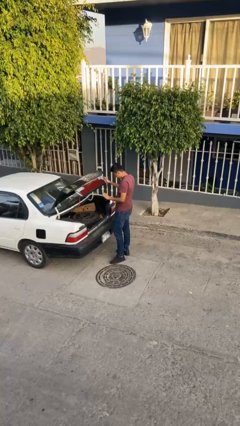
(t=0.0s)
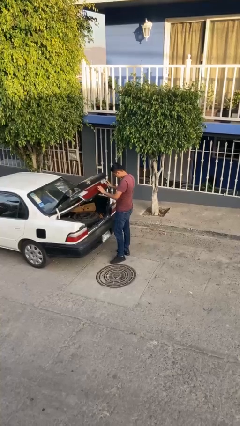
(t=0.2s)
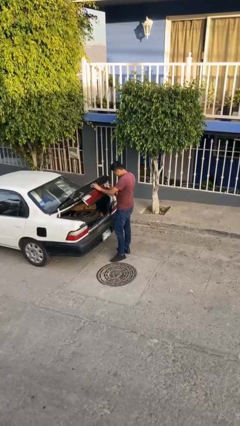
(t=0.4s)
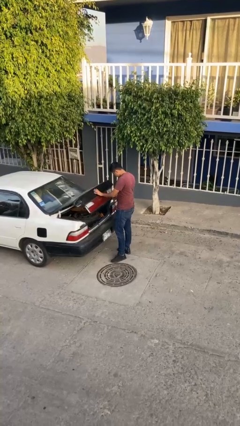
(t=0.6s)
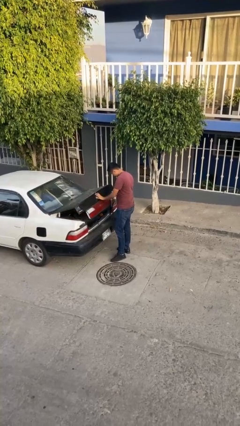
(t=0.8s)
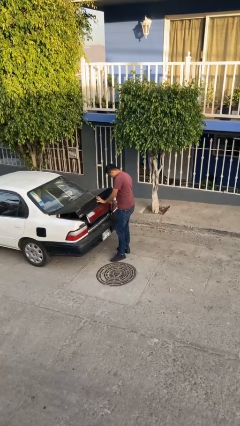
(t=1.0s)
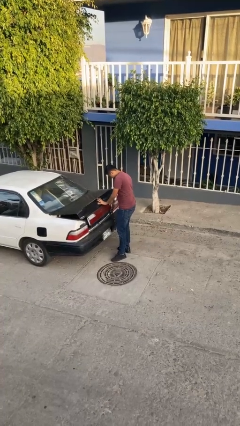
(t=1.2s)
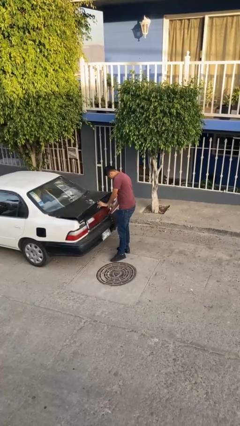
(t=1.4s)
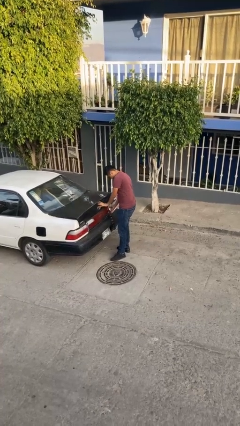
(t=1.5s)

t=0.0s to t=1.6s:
person closes car trunk

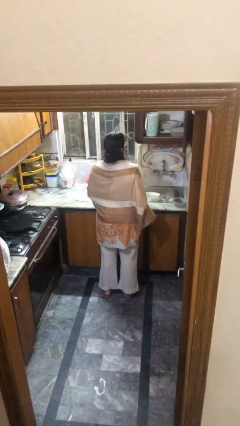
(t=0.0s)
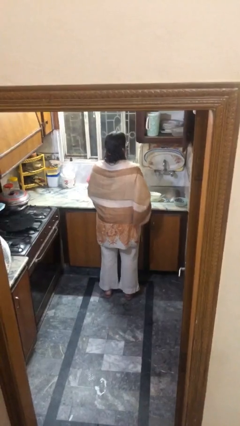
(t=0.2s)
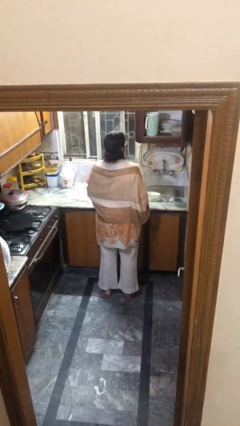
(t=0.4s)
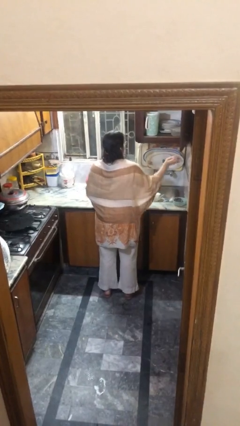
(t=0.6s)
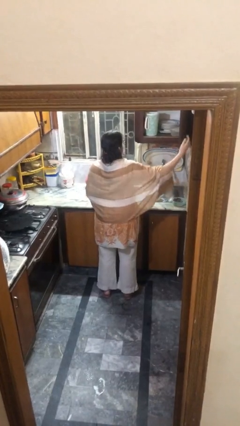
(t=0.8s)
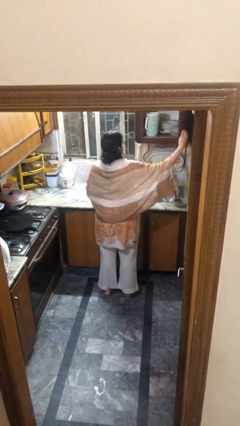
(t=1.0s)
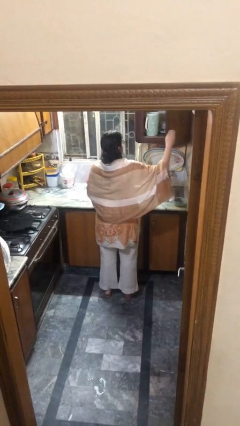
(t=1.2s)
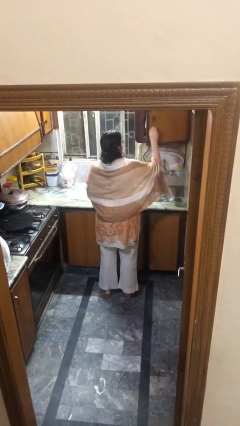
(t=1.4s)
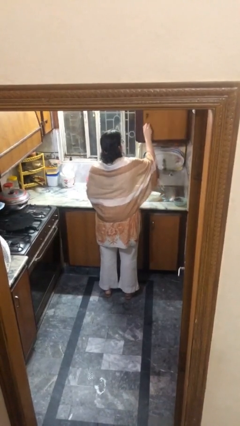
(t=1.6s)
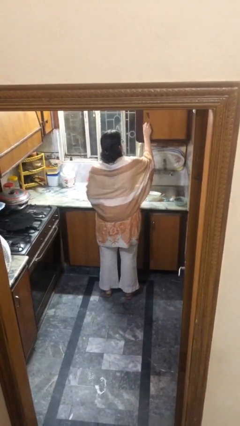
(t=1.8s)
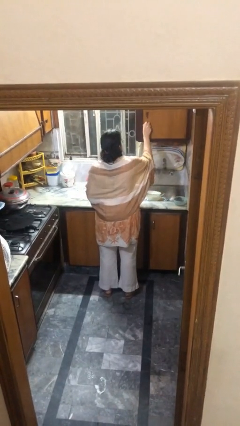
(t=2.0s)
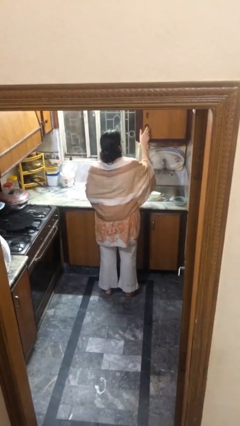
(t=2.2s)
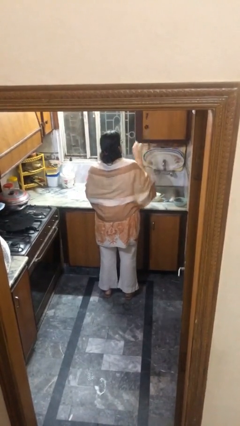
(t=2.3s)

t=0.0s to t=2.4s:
person closes kitchen drawer

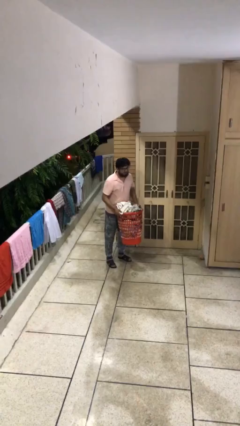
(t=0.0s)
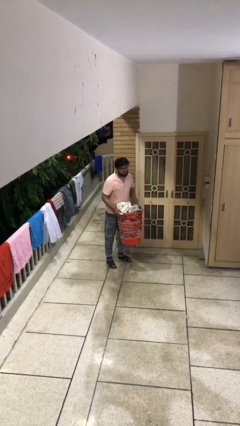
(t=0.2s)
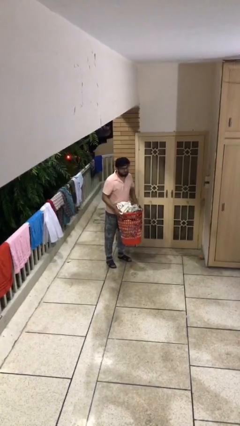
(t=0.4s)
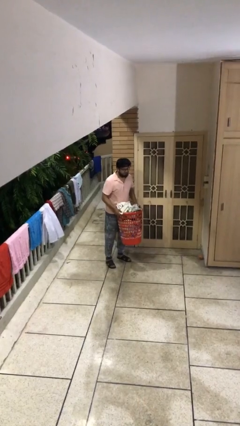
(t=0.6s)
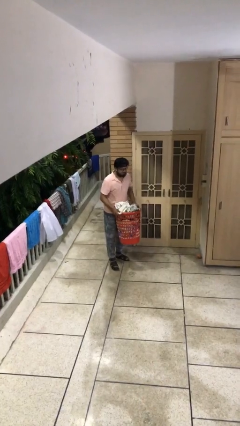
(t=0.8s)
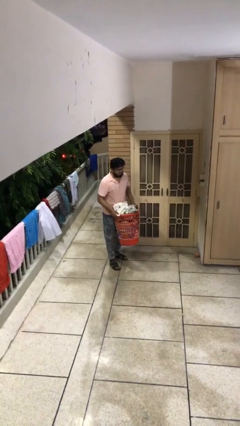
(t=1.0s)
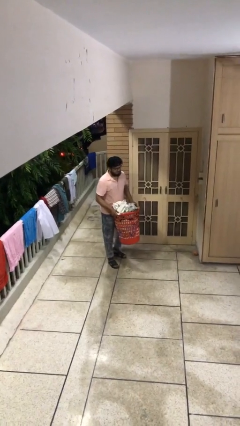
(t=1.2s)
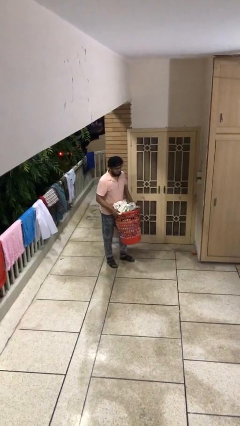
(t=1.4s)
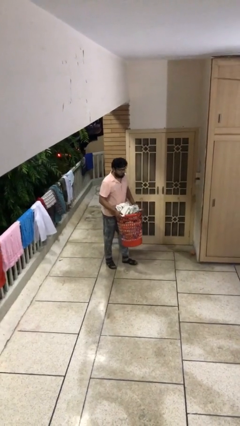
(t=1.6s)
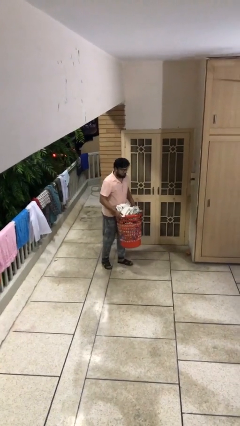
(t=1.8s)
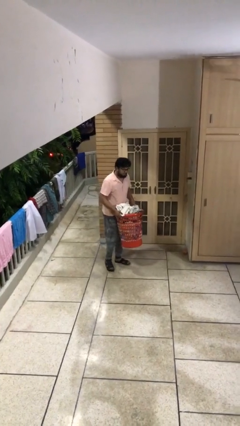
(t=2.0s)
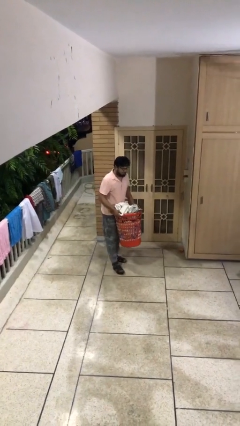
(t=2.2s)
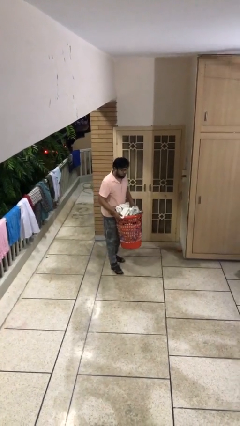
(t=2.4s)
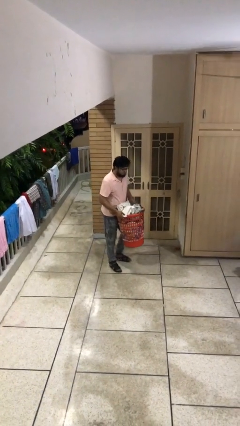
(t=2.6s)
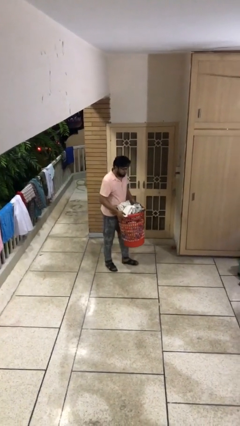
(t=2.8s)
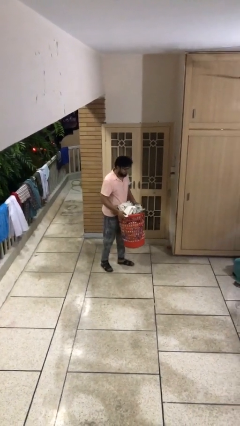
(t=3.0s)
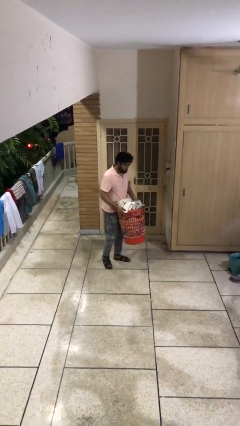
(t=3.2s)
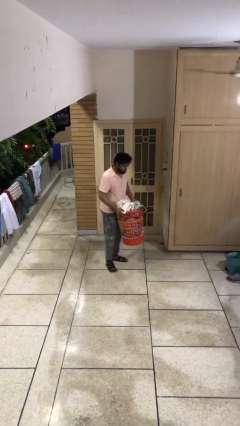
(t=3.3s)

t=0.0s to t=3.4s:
person carries heavy object

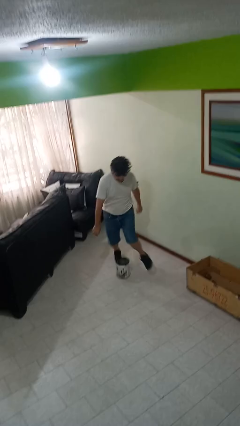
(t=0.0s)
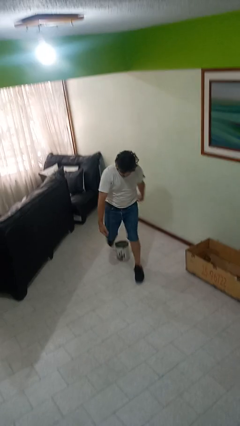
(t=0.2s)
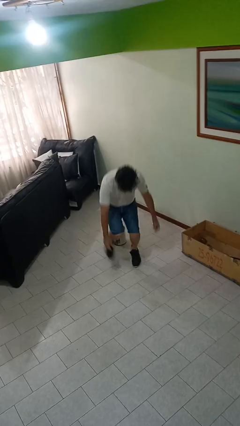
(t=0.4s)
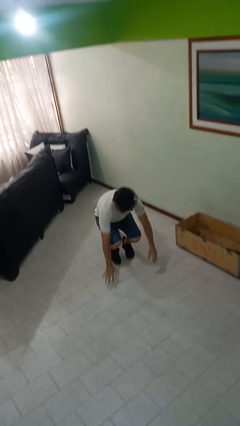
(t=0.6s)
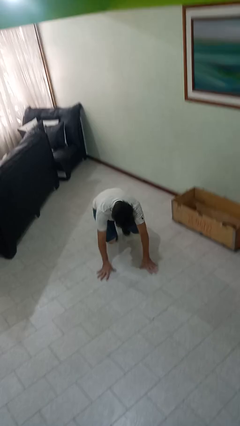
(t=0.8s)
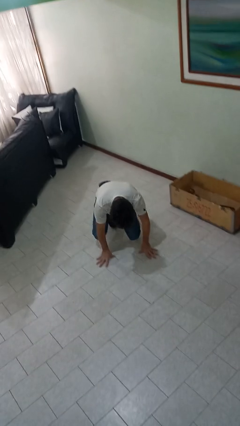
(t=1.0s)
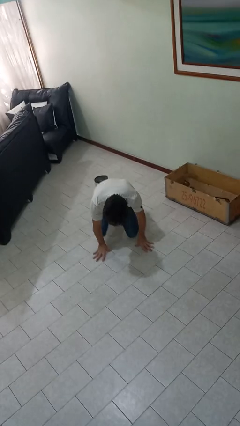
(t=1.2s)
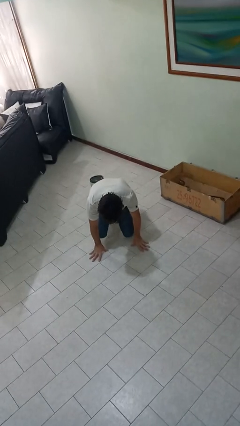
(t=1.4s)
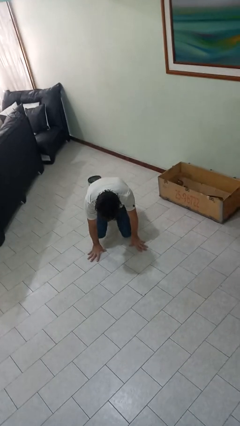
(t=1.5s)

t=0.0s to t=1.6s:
person trips on object on floor

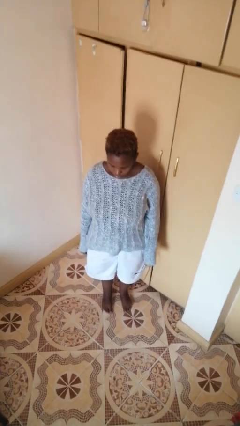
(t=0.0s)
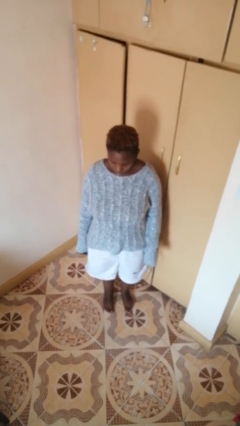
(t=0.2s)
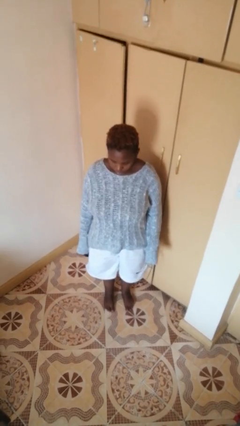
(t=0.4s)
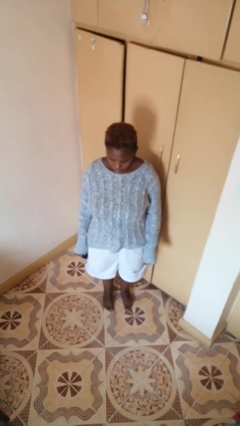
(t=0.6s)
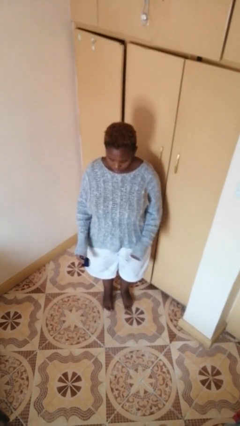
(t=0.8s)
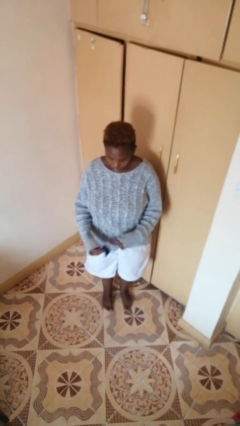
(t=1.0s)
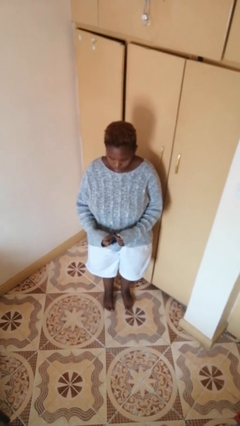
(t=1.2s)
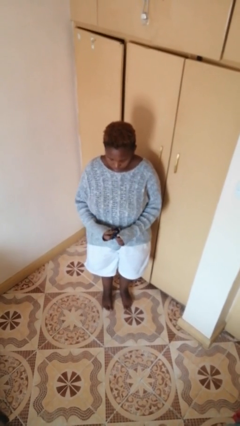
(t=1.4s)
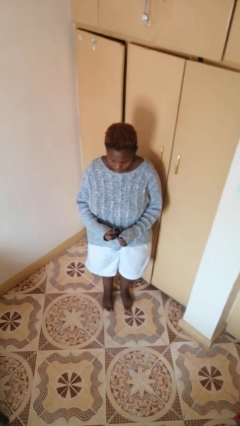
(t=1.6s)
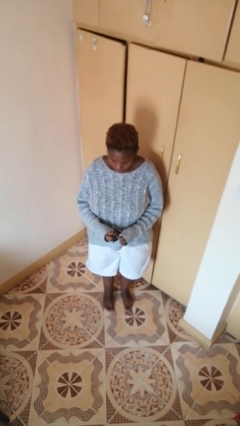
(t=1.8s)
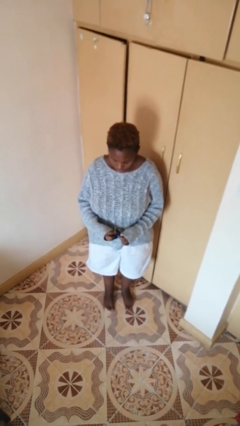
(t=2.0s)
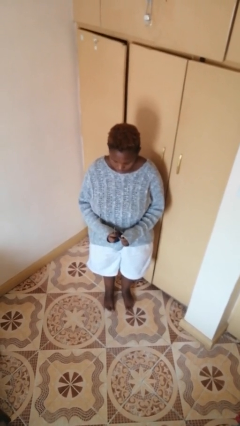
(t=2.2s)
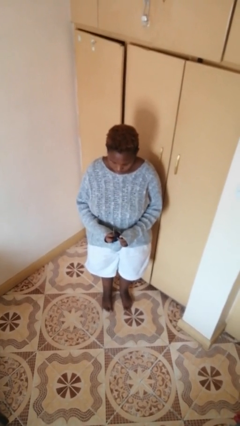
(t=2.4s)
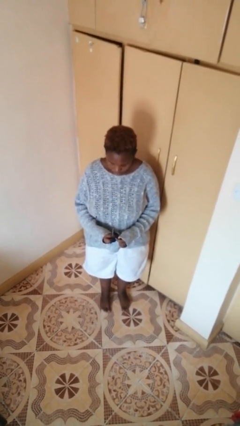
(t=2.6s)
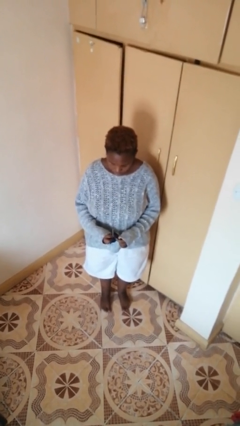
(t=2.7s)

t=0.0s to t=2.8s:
person cleans eyeglasses

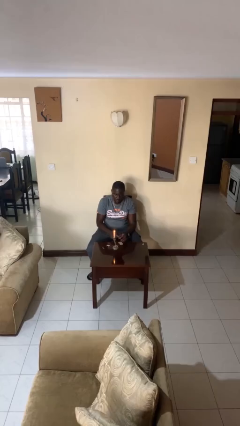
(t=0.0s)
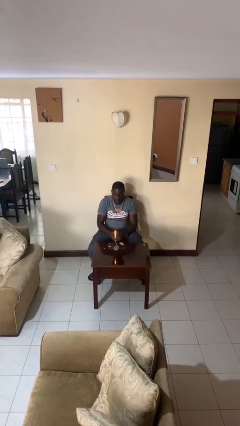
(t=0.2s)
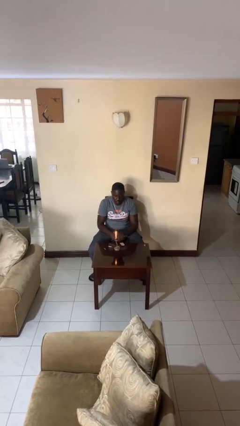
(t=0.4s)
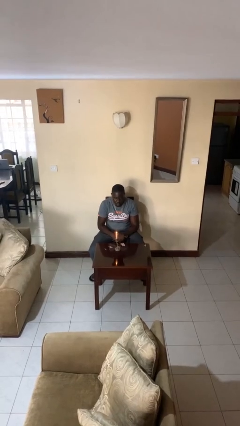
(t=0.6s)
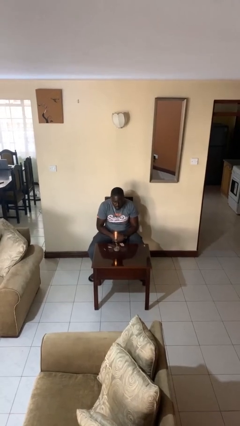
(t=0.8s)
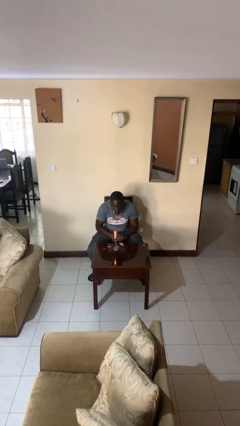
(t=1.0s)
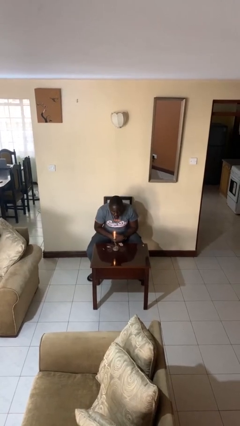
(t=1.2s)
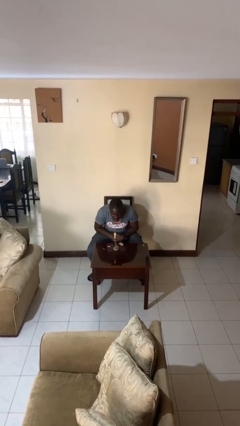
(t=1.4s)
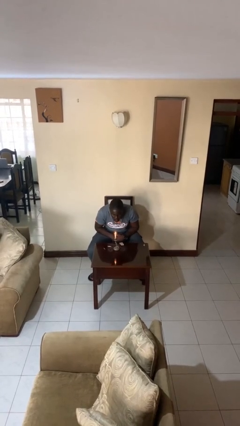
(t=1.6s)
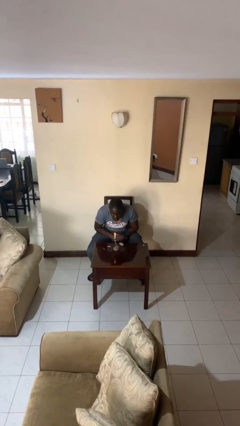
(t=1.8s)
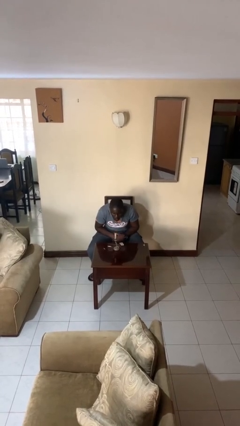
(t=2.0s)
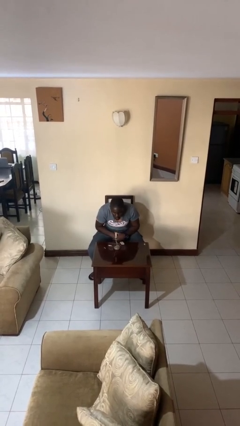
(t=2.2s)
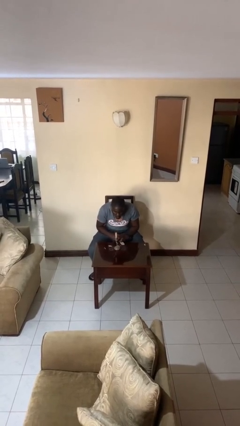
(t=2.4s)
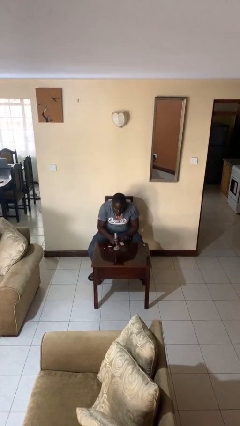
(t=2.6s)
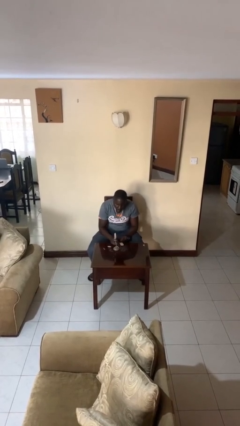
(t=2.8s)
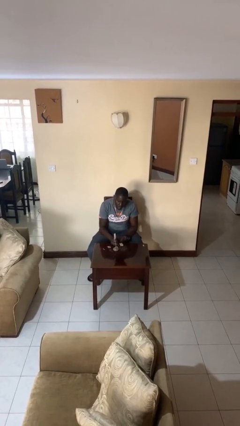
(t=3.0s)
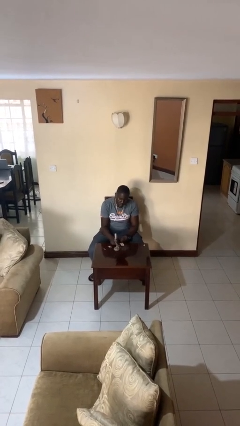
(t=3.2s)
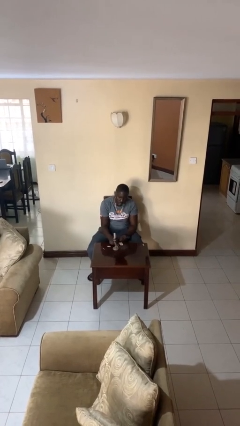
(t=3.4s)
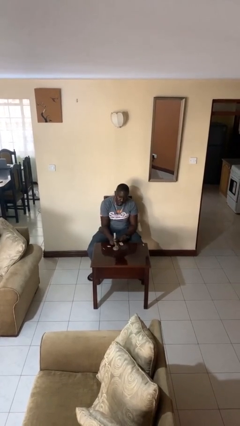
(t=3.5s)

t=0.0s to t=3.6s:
person extinguishes candle

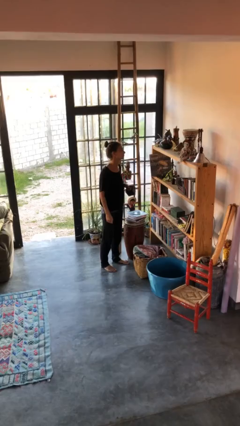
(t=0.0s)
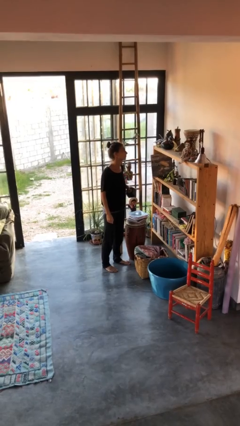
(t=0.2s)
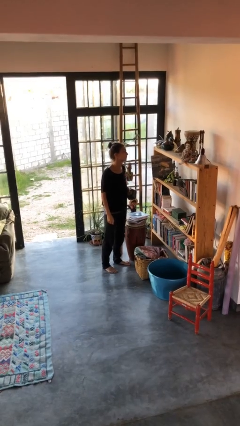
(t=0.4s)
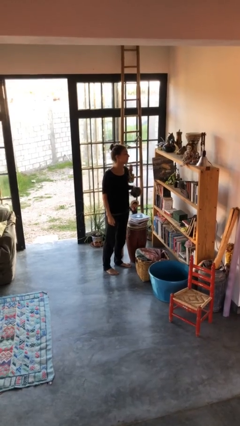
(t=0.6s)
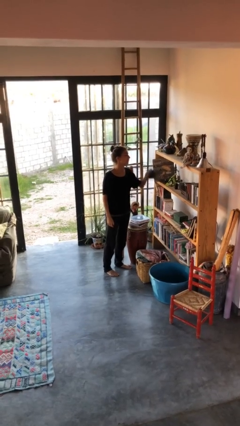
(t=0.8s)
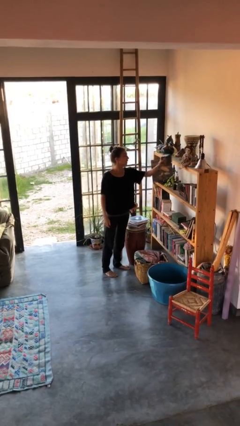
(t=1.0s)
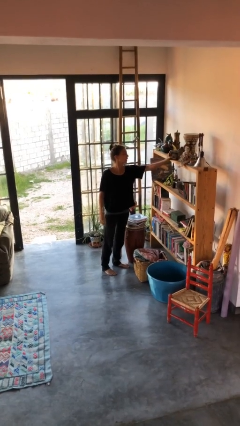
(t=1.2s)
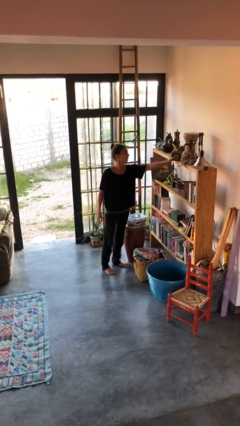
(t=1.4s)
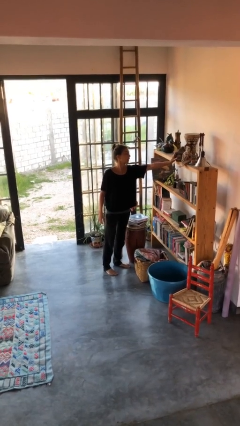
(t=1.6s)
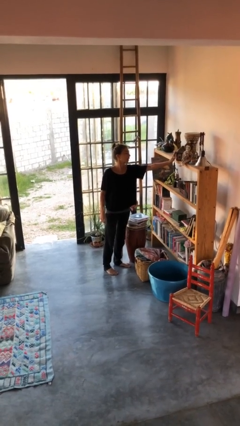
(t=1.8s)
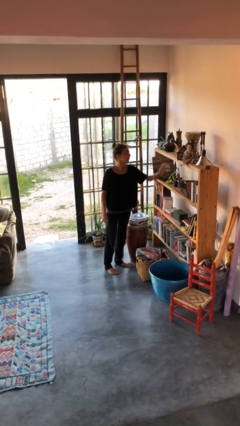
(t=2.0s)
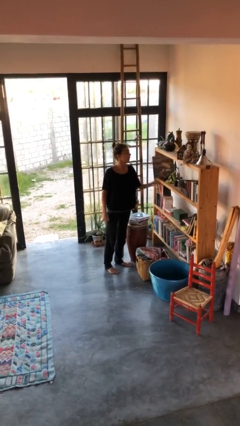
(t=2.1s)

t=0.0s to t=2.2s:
person puts down object on countertop
